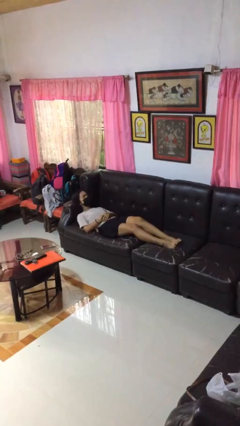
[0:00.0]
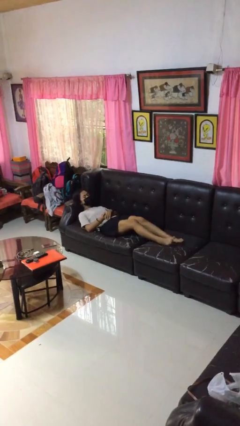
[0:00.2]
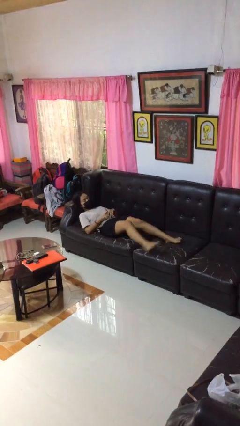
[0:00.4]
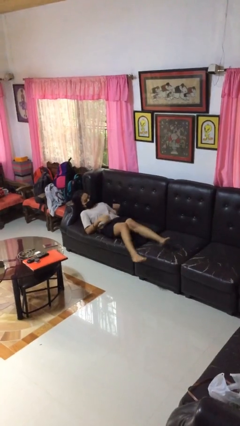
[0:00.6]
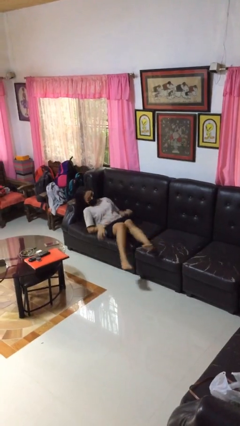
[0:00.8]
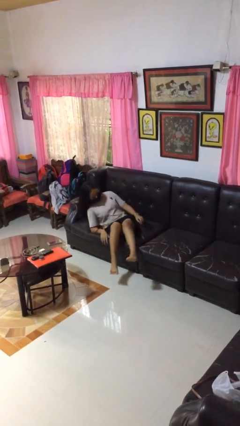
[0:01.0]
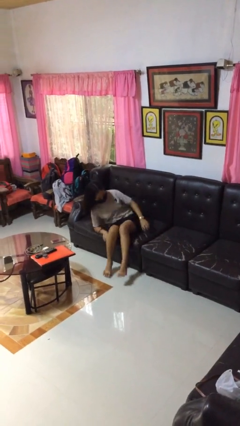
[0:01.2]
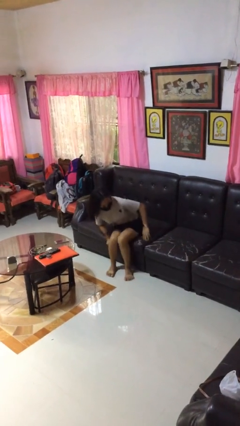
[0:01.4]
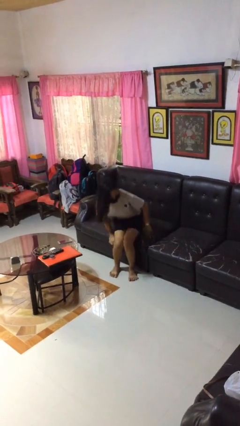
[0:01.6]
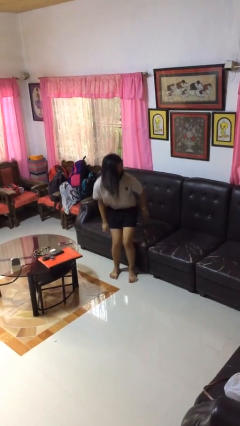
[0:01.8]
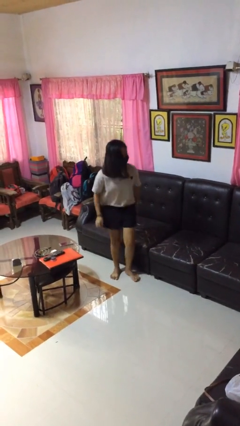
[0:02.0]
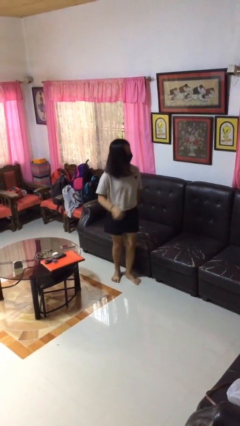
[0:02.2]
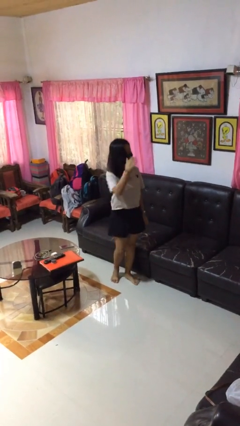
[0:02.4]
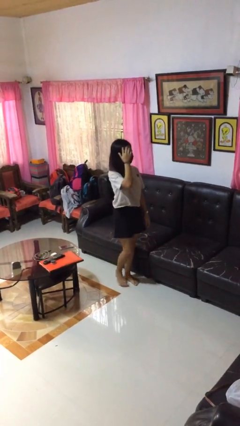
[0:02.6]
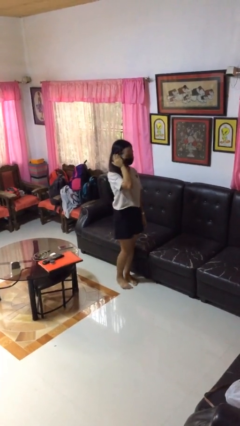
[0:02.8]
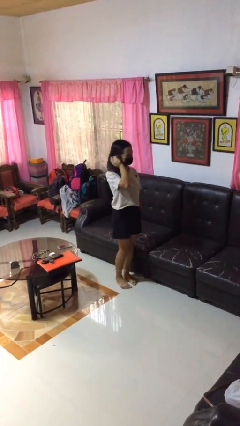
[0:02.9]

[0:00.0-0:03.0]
person stands up

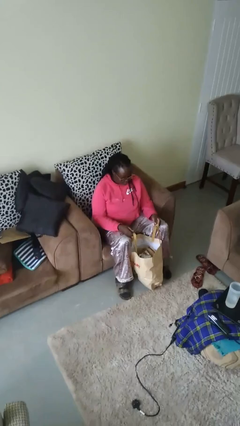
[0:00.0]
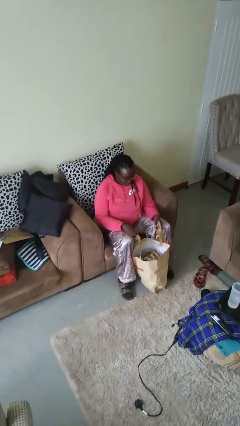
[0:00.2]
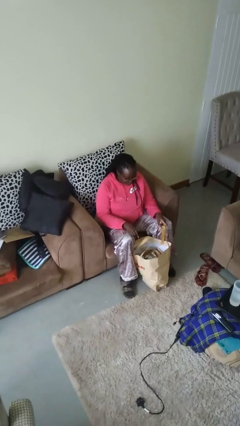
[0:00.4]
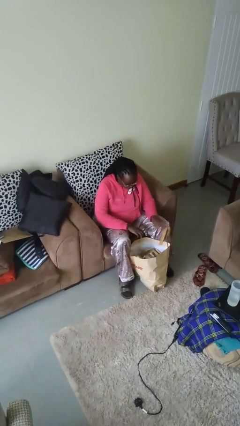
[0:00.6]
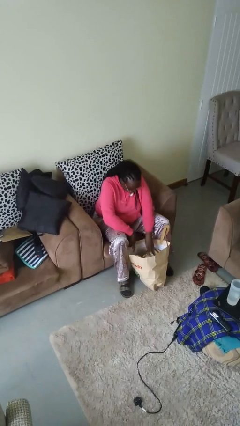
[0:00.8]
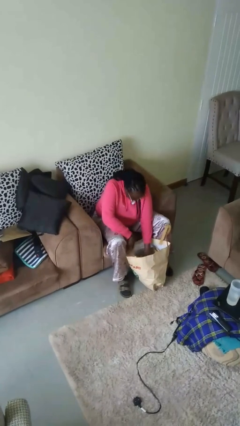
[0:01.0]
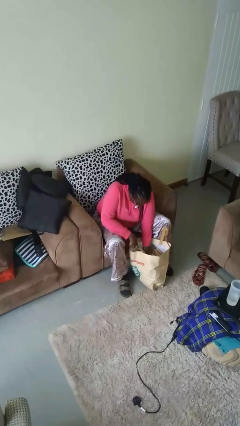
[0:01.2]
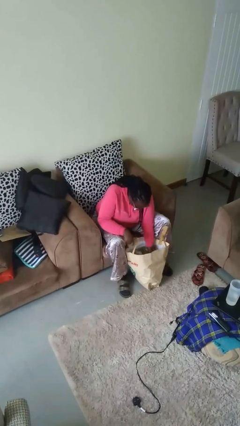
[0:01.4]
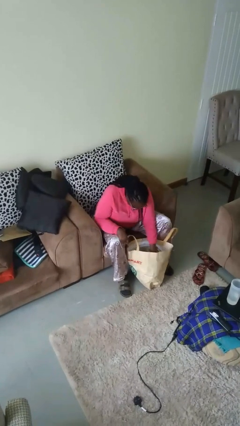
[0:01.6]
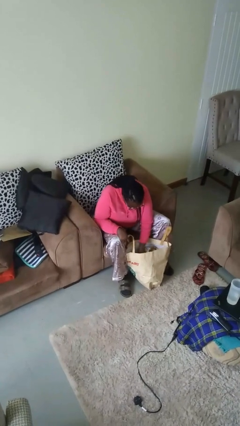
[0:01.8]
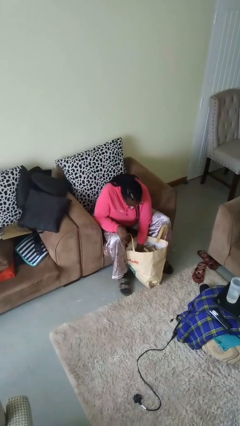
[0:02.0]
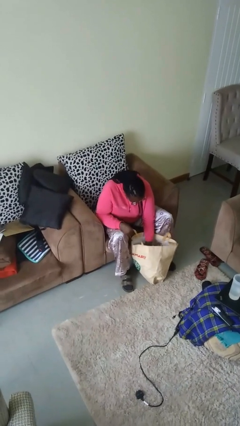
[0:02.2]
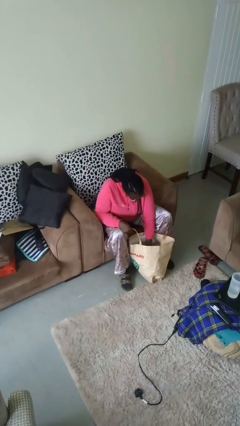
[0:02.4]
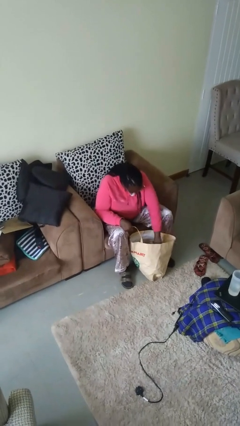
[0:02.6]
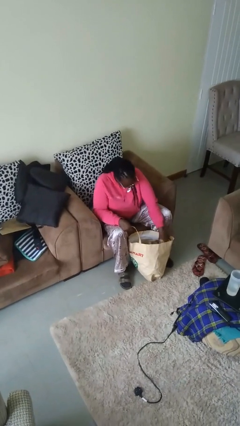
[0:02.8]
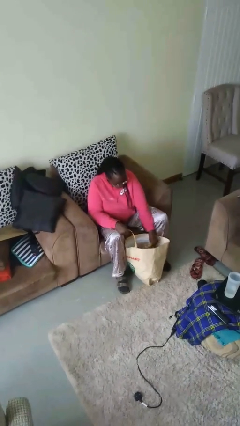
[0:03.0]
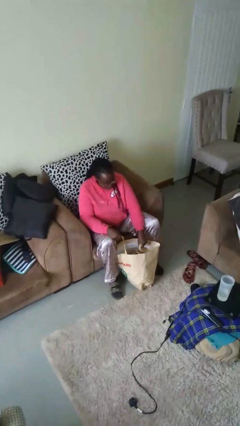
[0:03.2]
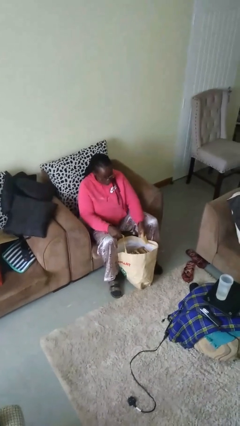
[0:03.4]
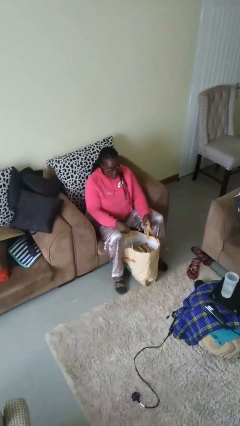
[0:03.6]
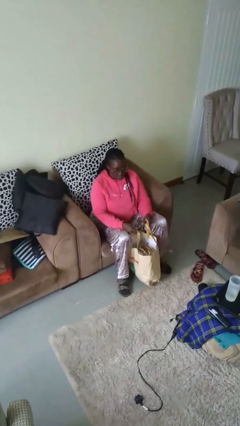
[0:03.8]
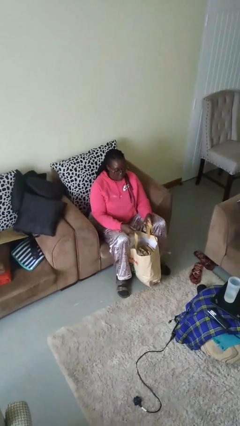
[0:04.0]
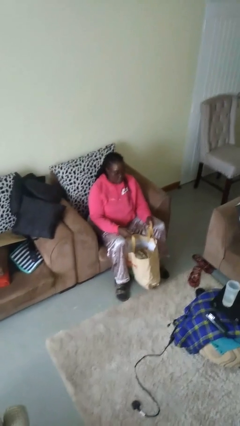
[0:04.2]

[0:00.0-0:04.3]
person searches in bag

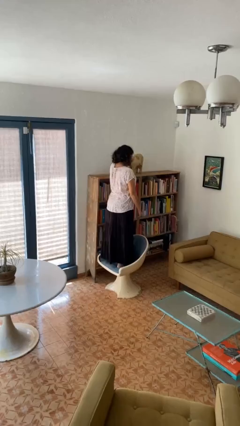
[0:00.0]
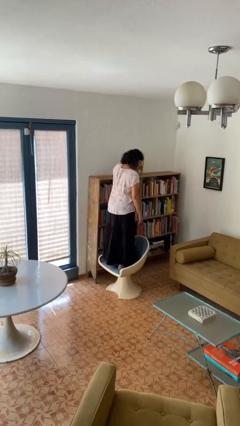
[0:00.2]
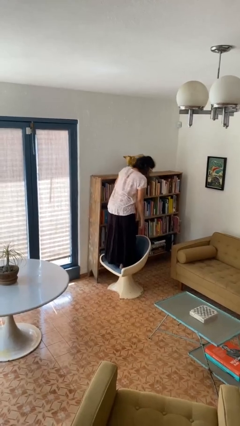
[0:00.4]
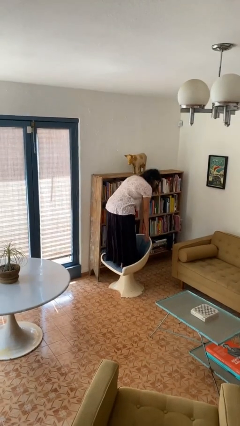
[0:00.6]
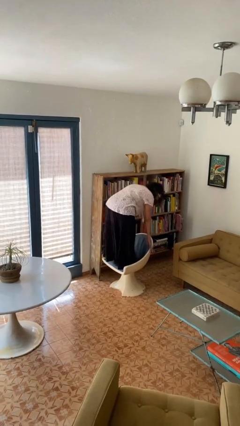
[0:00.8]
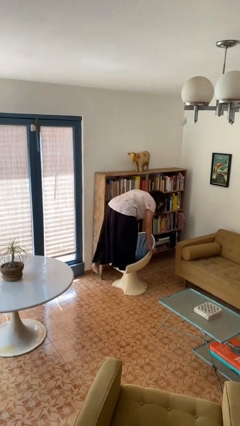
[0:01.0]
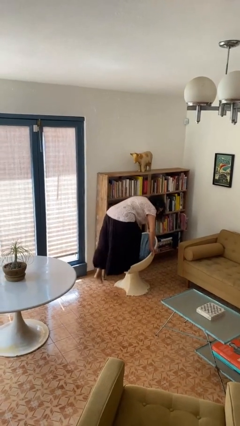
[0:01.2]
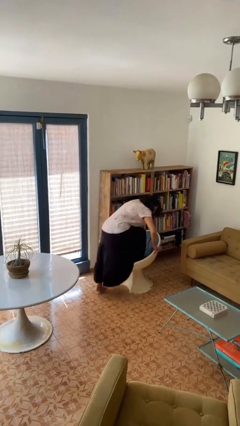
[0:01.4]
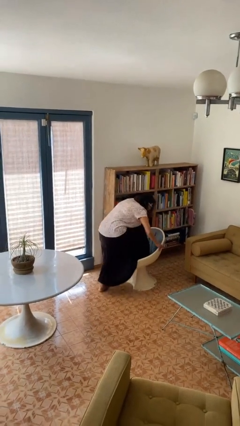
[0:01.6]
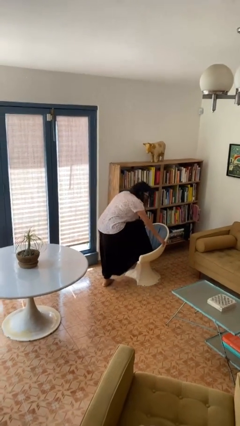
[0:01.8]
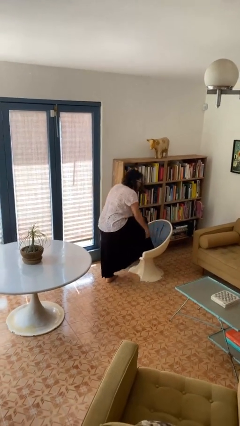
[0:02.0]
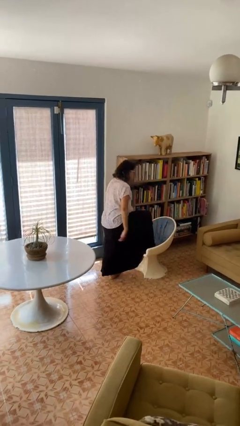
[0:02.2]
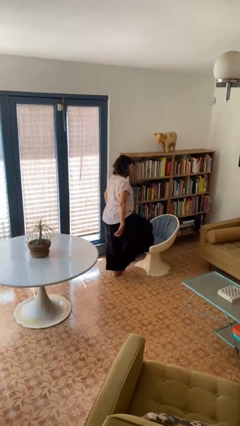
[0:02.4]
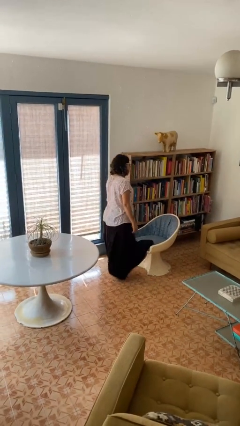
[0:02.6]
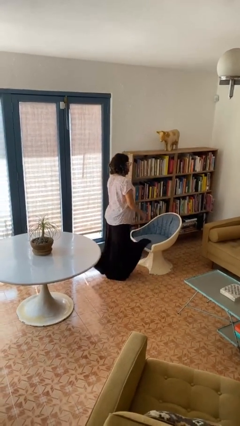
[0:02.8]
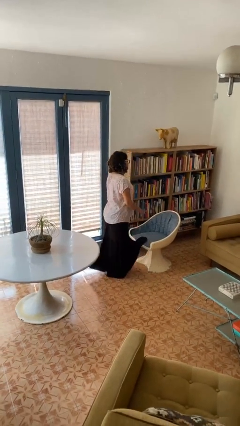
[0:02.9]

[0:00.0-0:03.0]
person climbs off chair

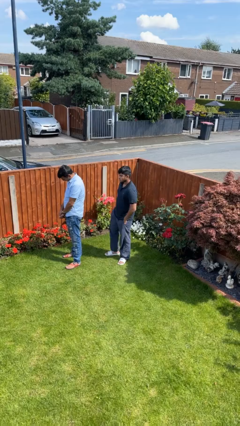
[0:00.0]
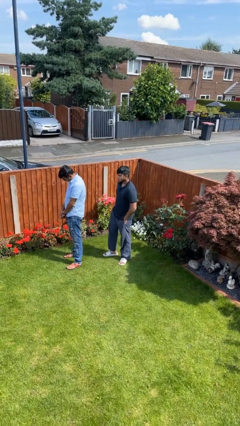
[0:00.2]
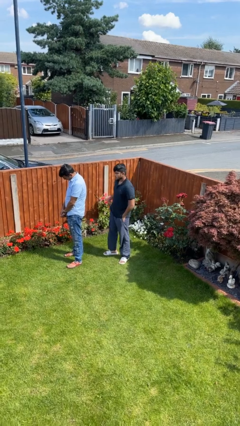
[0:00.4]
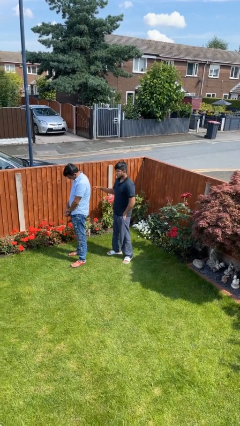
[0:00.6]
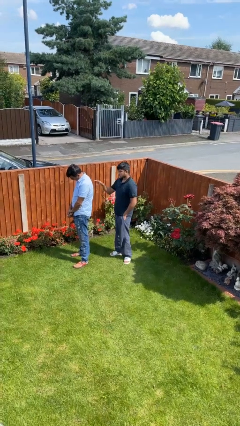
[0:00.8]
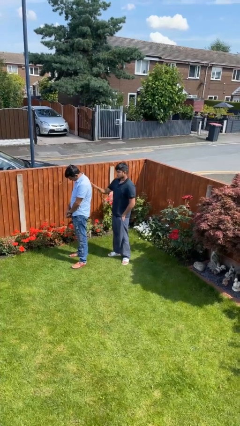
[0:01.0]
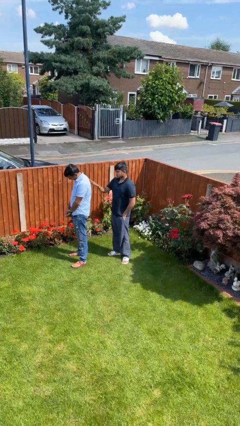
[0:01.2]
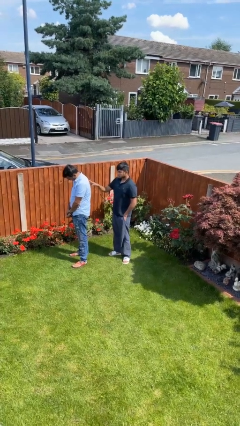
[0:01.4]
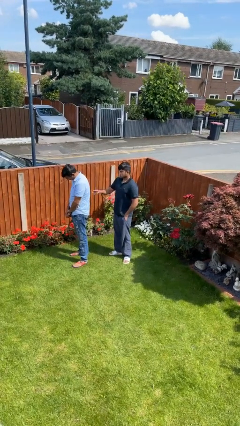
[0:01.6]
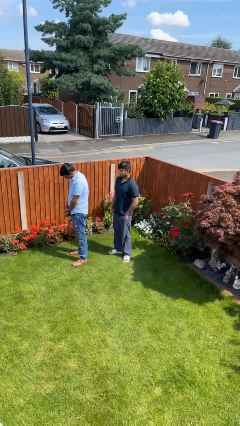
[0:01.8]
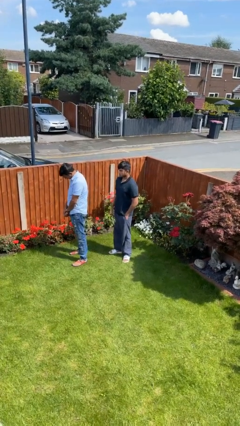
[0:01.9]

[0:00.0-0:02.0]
person touches back of person

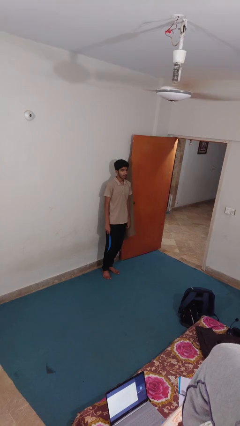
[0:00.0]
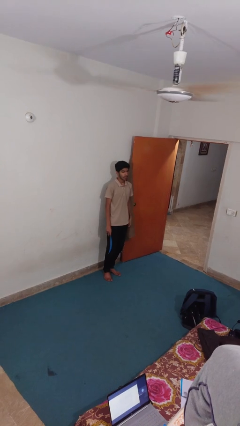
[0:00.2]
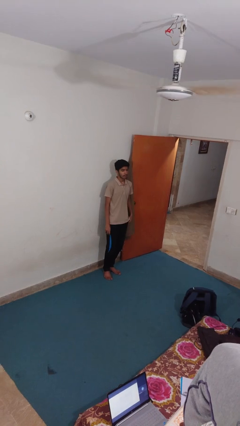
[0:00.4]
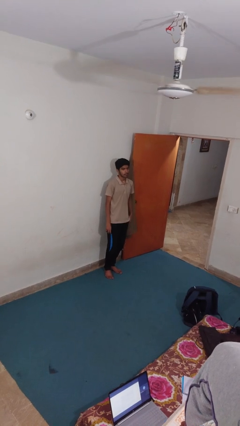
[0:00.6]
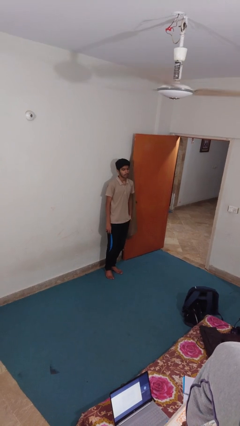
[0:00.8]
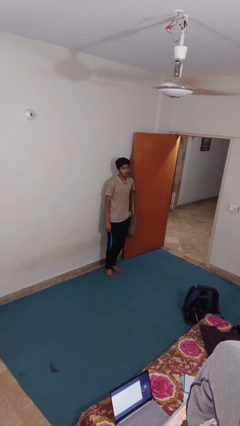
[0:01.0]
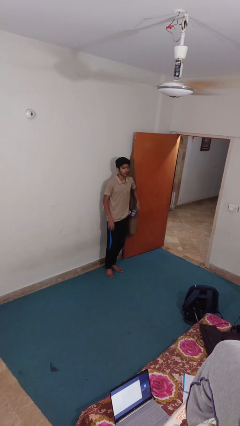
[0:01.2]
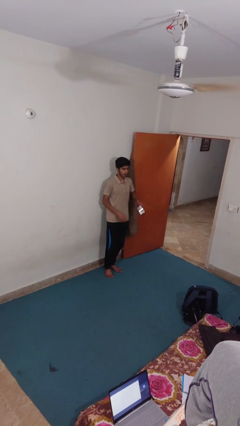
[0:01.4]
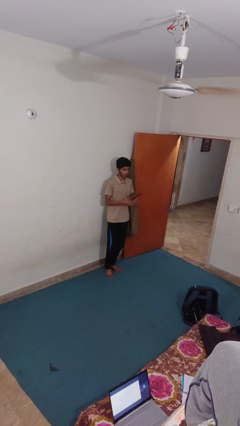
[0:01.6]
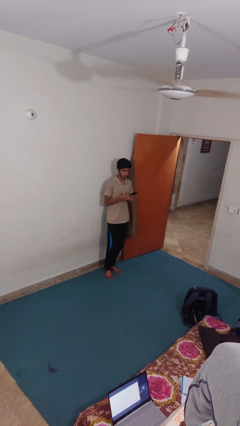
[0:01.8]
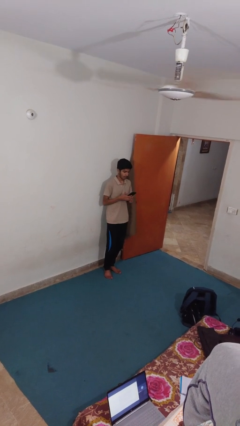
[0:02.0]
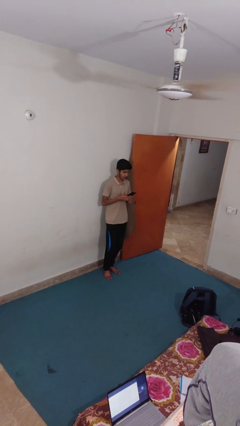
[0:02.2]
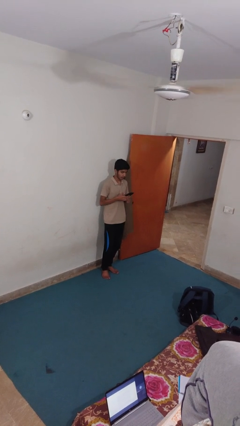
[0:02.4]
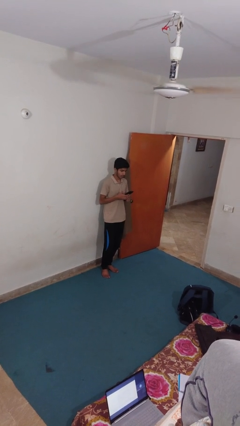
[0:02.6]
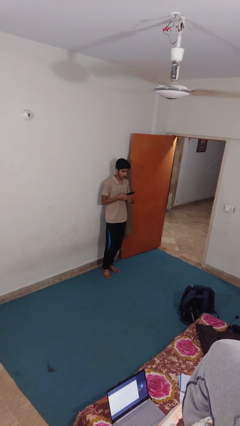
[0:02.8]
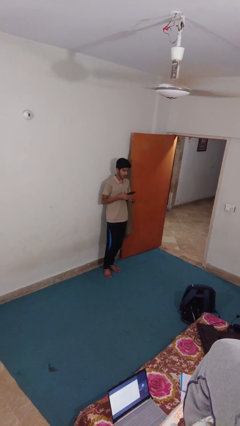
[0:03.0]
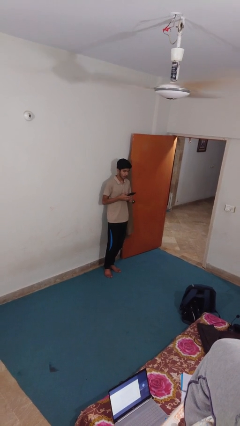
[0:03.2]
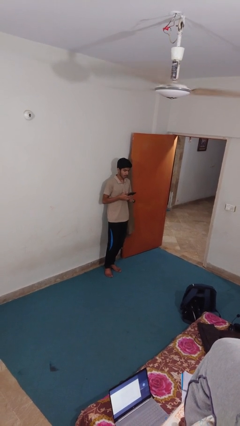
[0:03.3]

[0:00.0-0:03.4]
person takes phone from pocket

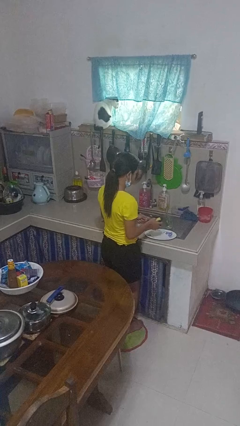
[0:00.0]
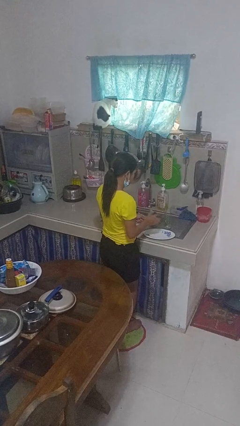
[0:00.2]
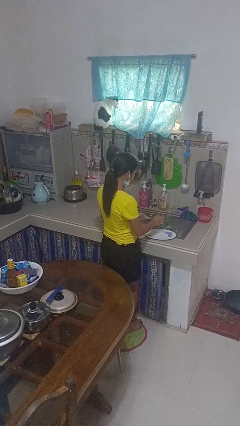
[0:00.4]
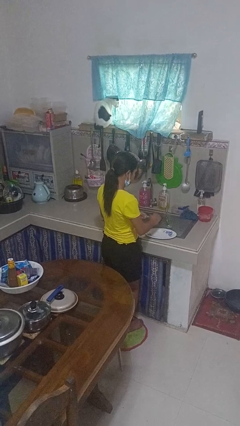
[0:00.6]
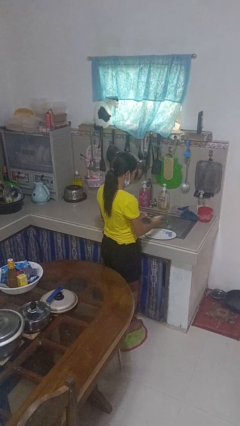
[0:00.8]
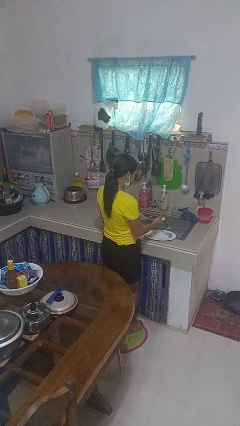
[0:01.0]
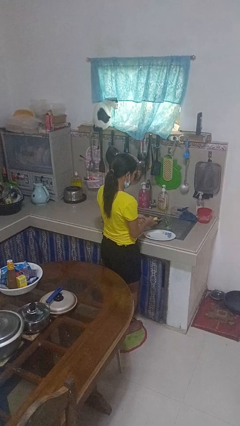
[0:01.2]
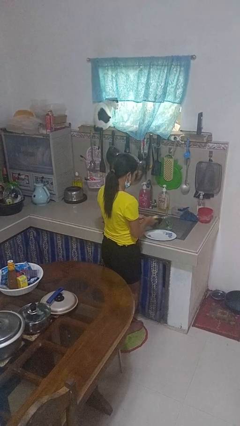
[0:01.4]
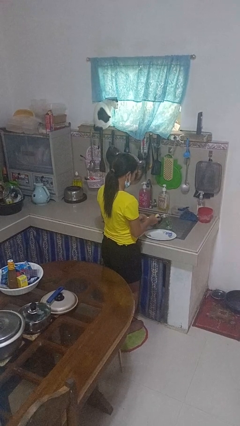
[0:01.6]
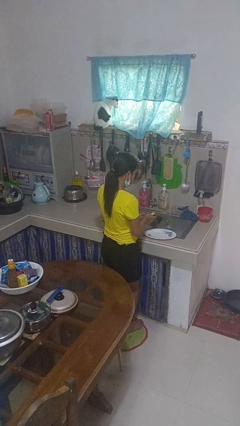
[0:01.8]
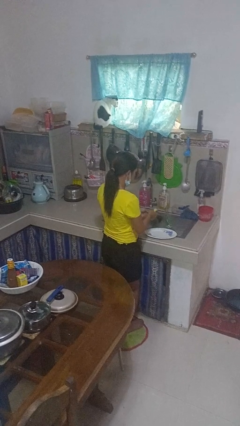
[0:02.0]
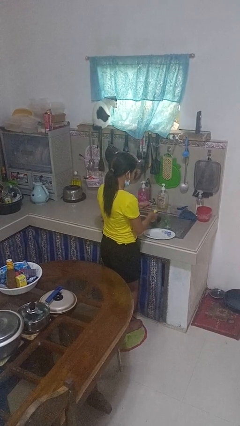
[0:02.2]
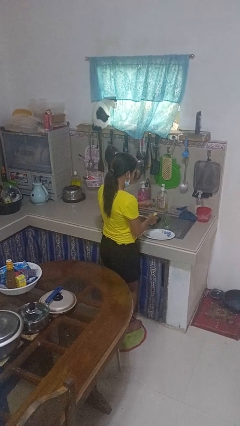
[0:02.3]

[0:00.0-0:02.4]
person washes dish
